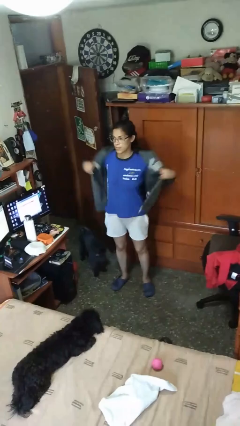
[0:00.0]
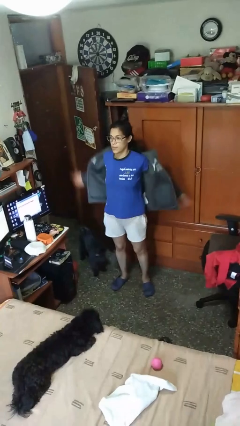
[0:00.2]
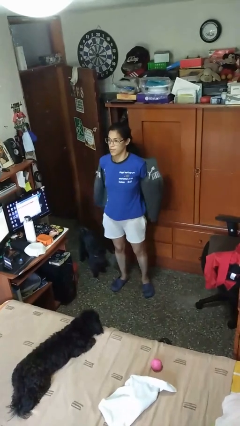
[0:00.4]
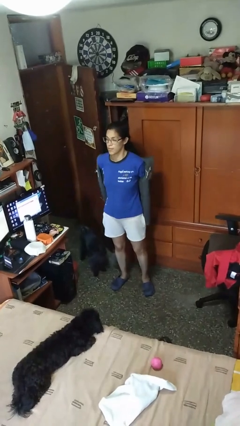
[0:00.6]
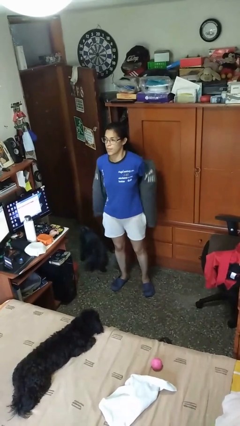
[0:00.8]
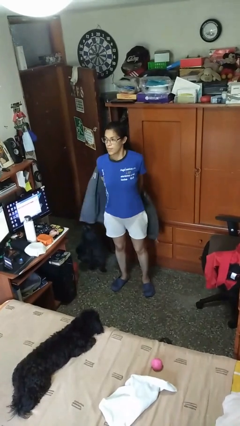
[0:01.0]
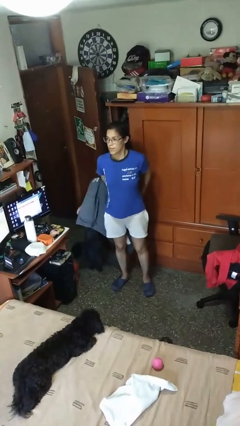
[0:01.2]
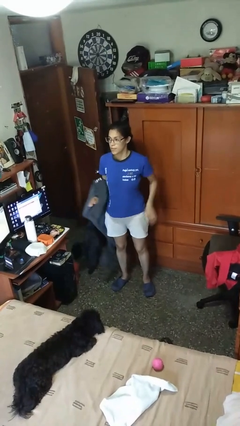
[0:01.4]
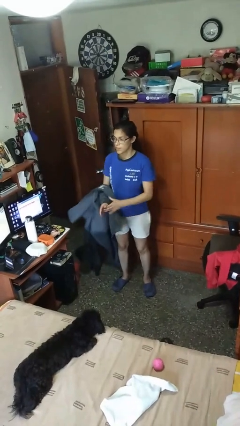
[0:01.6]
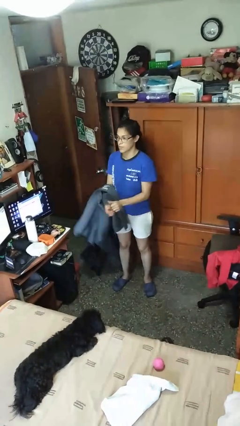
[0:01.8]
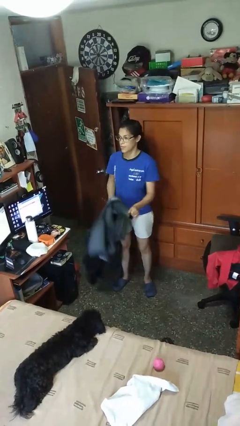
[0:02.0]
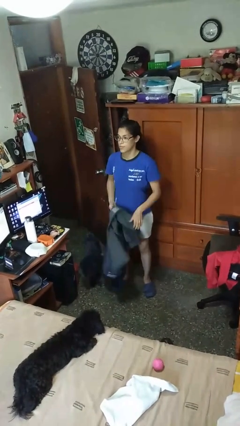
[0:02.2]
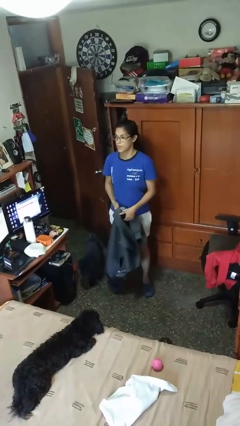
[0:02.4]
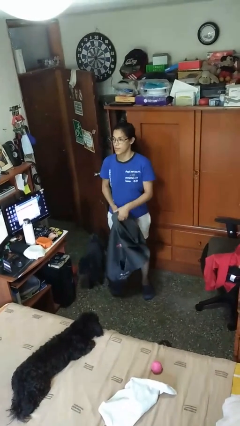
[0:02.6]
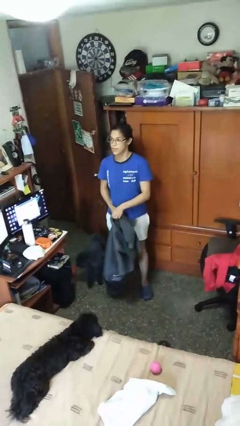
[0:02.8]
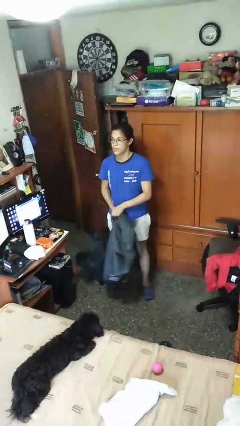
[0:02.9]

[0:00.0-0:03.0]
person takes off jacket

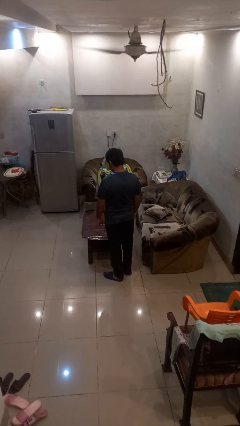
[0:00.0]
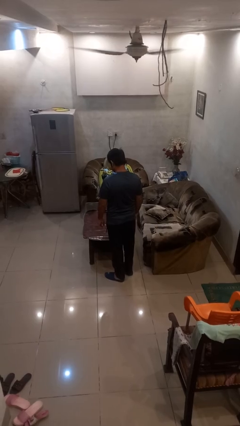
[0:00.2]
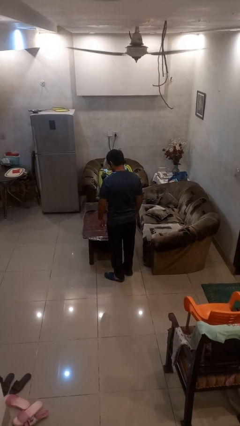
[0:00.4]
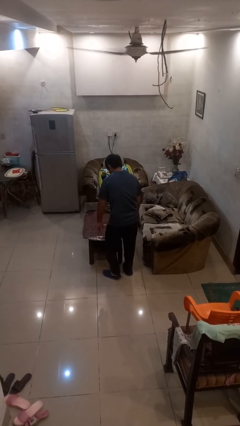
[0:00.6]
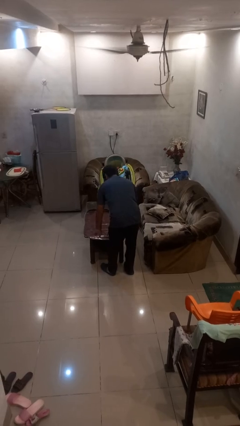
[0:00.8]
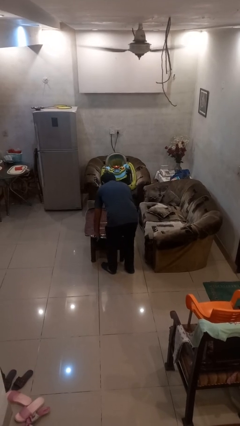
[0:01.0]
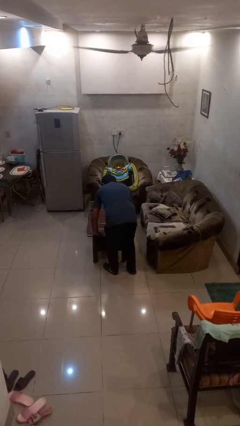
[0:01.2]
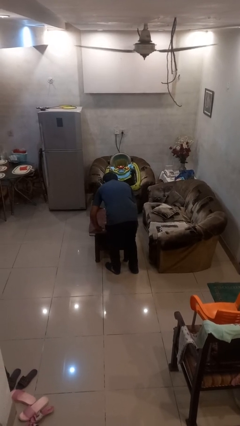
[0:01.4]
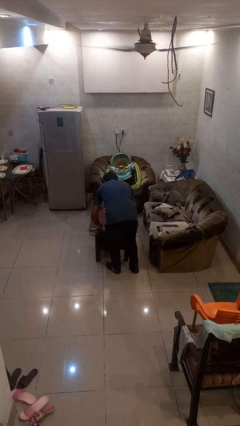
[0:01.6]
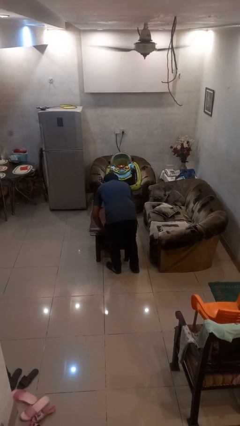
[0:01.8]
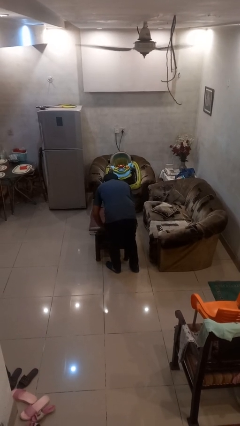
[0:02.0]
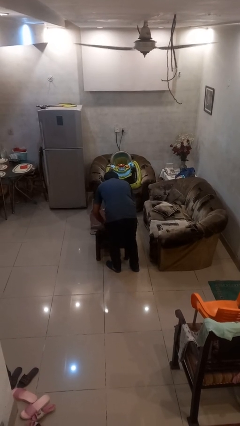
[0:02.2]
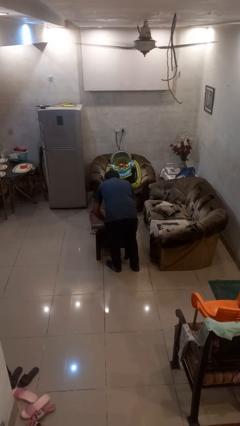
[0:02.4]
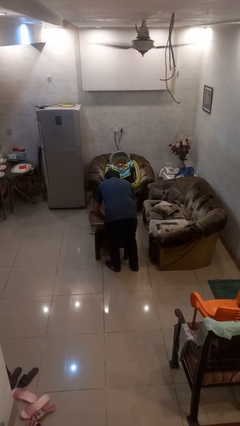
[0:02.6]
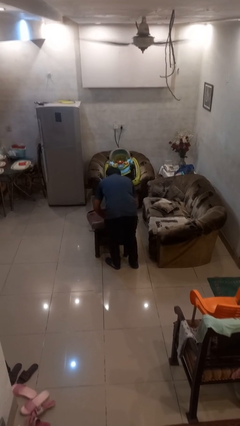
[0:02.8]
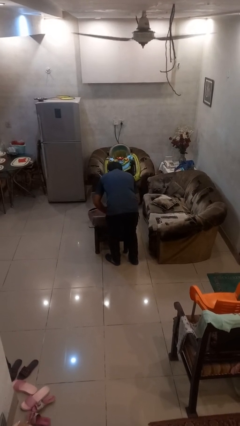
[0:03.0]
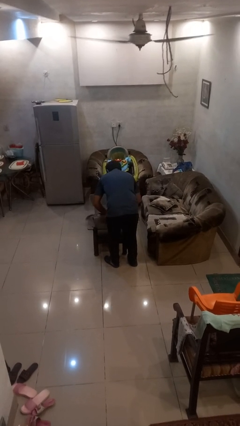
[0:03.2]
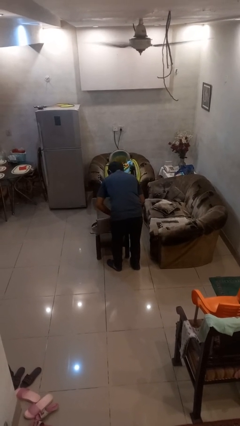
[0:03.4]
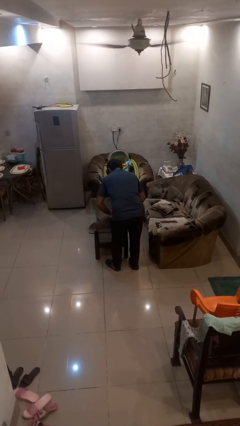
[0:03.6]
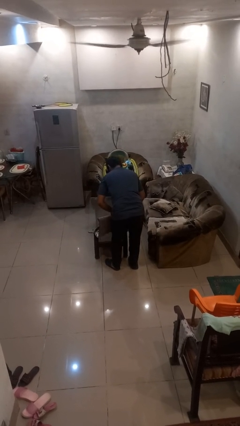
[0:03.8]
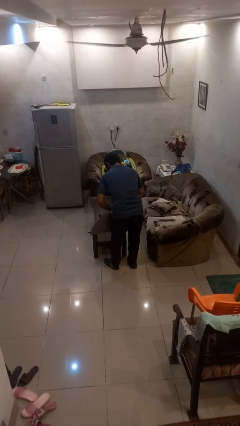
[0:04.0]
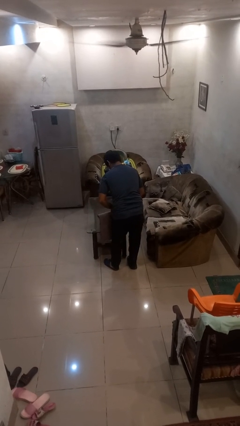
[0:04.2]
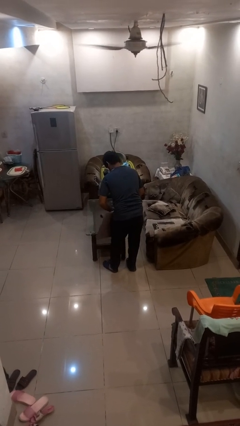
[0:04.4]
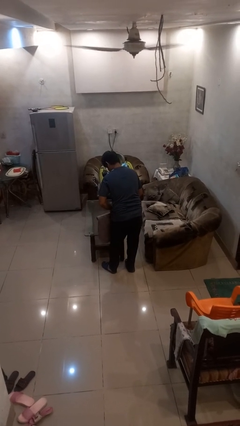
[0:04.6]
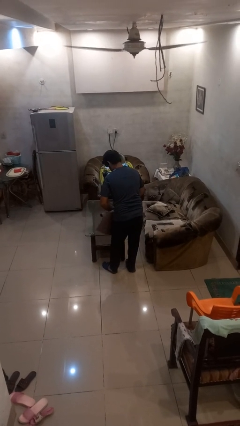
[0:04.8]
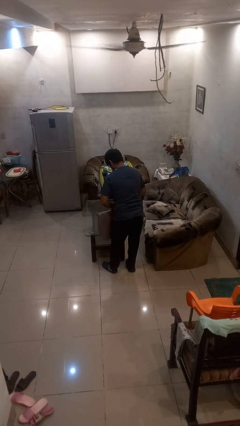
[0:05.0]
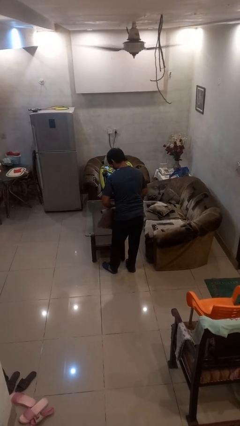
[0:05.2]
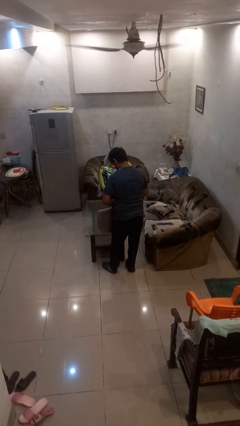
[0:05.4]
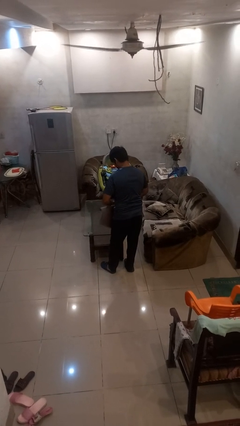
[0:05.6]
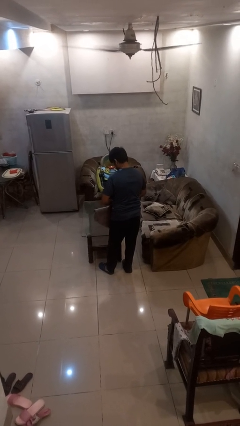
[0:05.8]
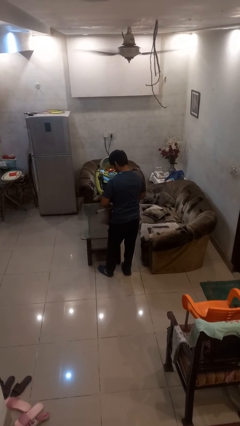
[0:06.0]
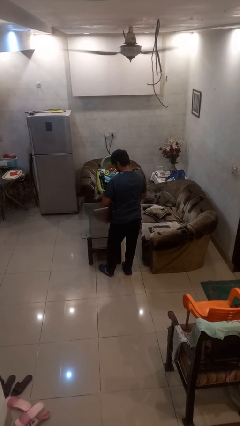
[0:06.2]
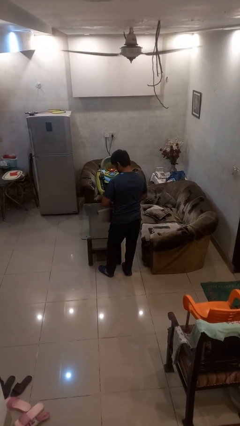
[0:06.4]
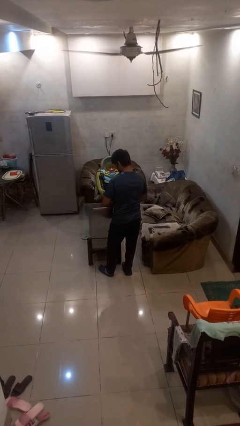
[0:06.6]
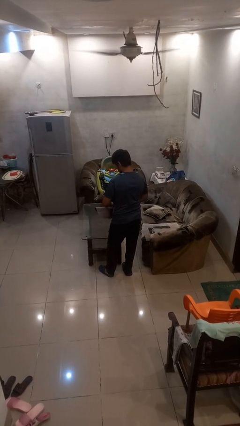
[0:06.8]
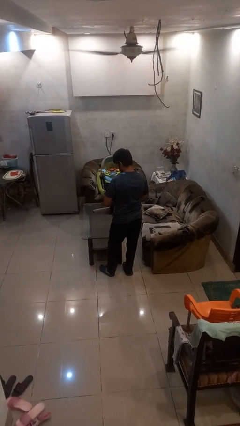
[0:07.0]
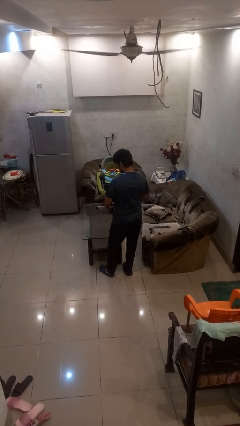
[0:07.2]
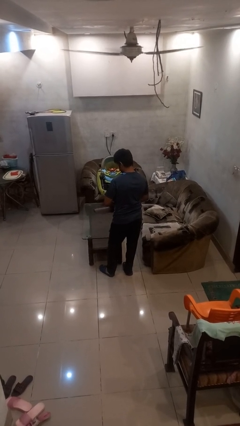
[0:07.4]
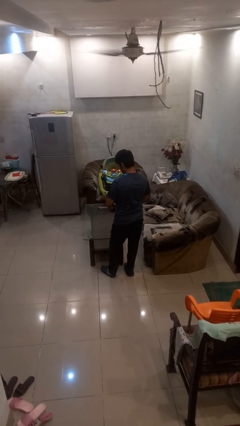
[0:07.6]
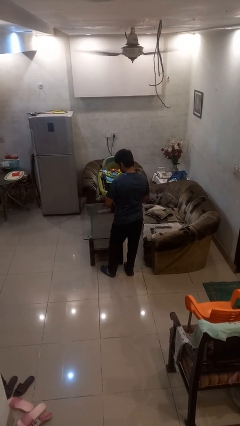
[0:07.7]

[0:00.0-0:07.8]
person folds tablecloth

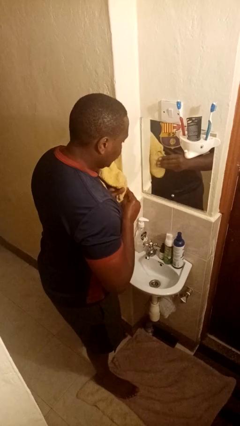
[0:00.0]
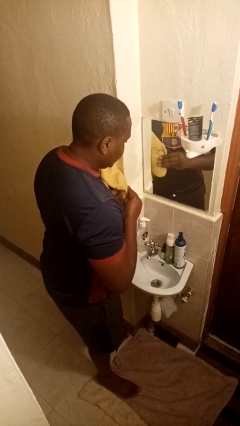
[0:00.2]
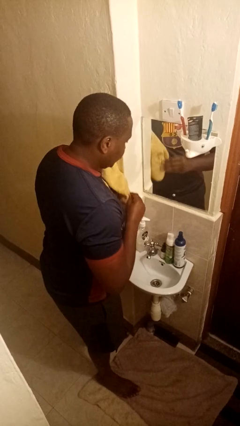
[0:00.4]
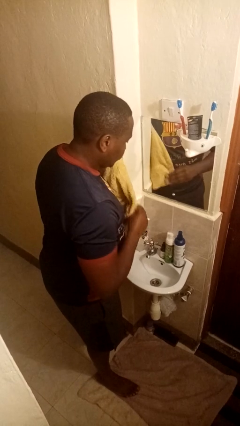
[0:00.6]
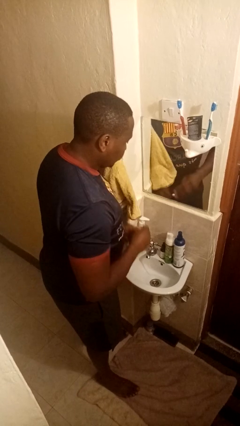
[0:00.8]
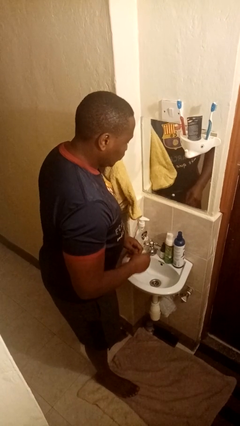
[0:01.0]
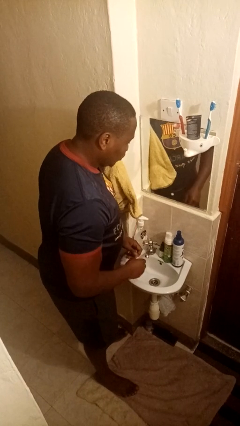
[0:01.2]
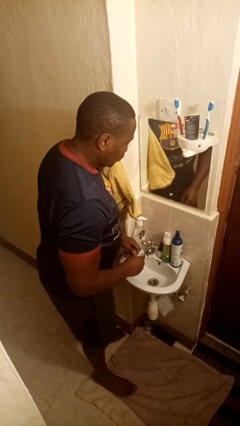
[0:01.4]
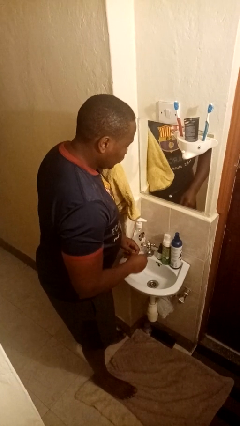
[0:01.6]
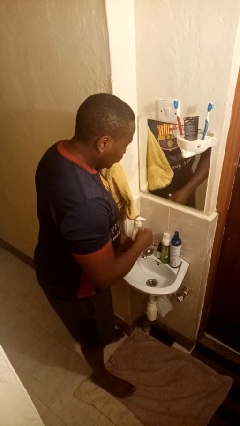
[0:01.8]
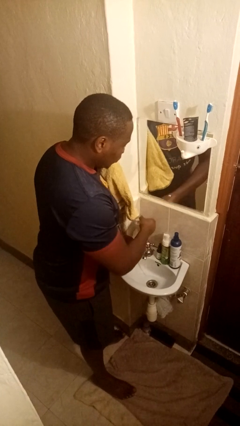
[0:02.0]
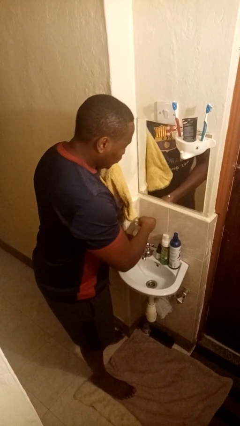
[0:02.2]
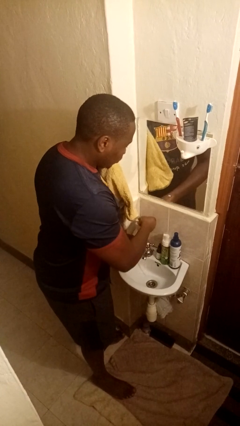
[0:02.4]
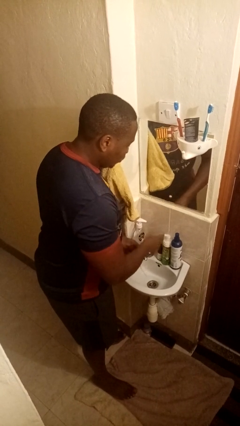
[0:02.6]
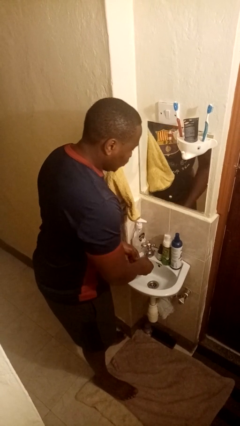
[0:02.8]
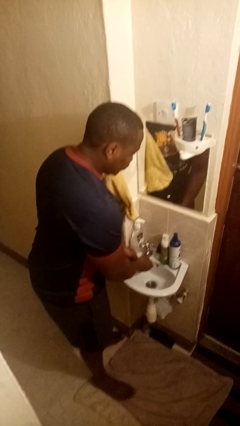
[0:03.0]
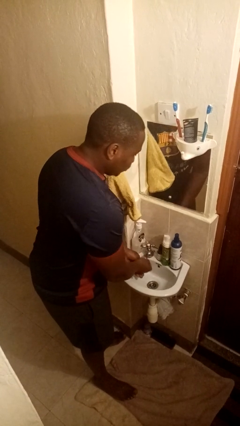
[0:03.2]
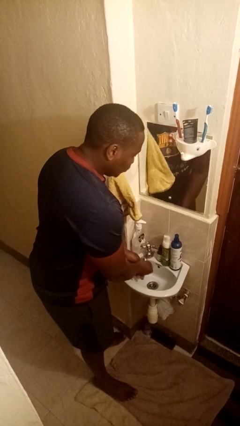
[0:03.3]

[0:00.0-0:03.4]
person dries hands with towel

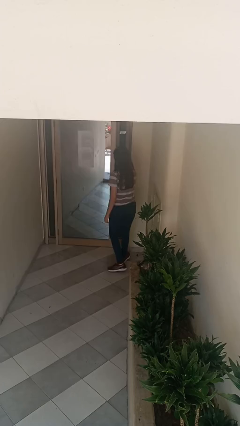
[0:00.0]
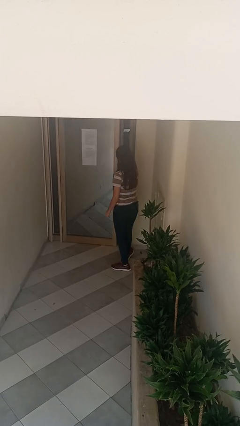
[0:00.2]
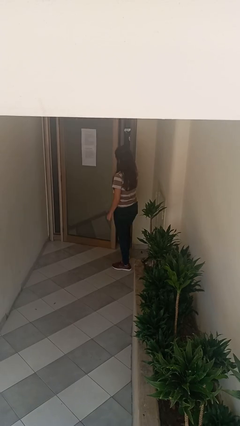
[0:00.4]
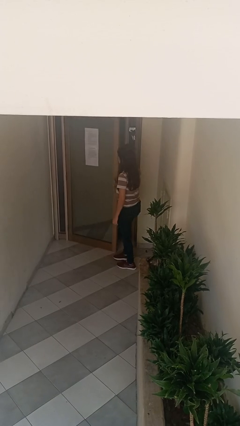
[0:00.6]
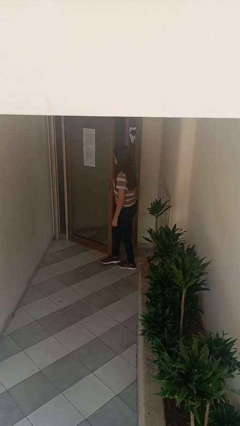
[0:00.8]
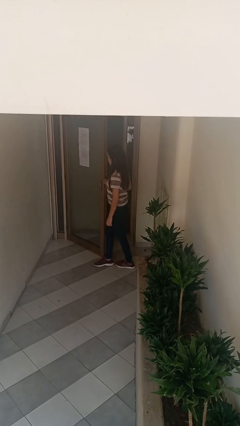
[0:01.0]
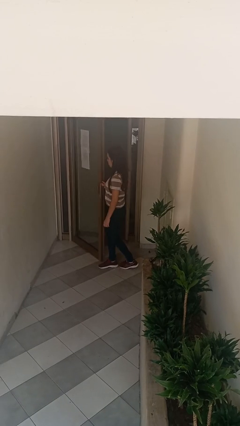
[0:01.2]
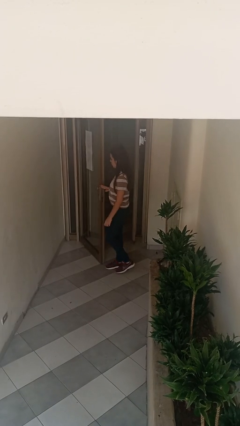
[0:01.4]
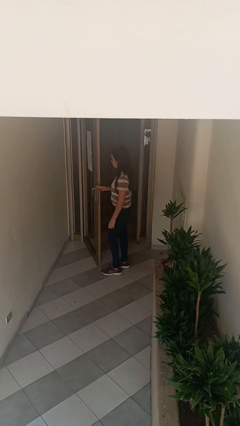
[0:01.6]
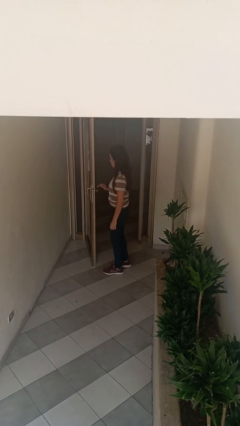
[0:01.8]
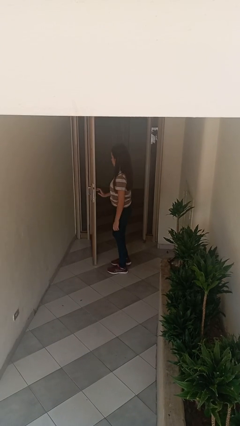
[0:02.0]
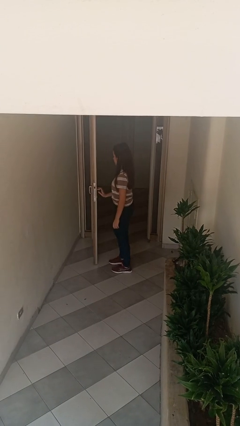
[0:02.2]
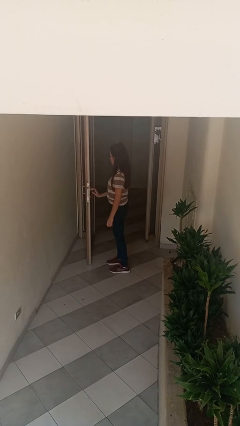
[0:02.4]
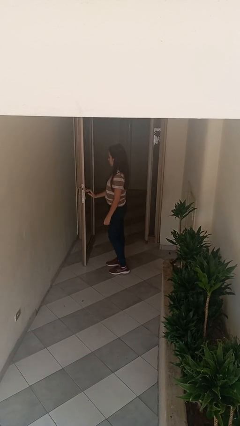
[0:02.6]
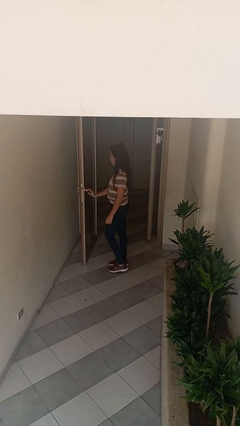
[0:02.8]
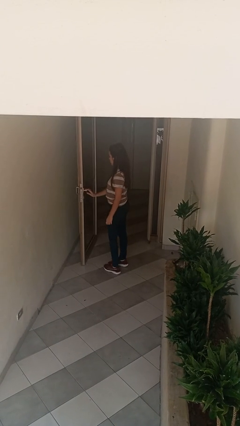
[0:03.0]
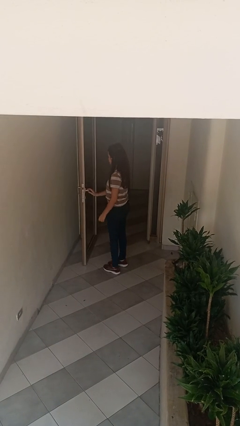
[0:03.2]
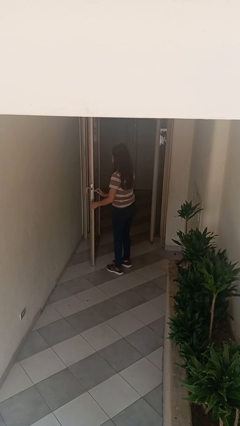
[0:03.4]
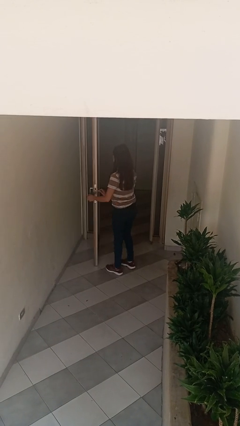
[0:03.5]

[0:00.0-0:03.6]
person opens facility door
